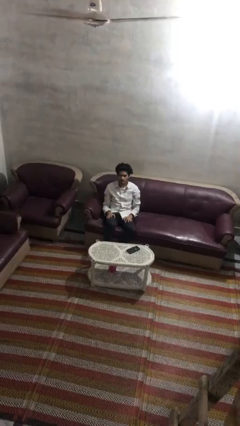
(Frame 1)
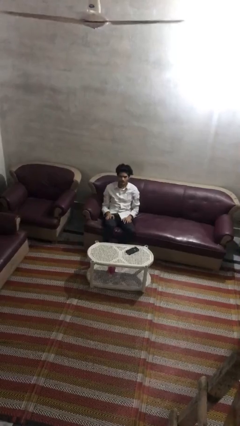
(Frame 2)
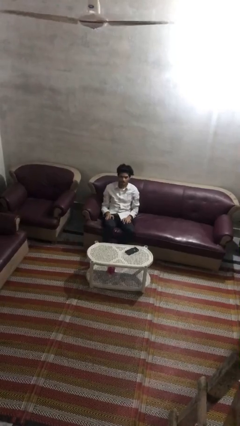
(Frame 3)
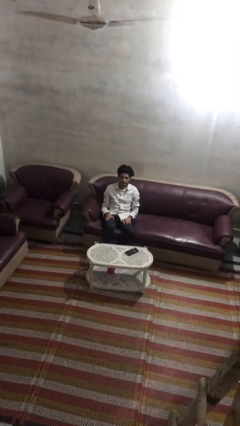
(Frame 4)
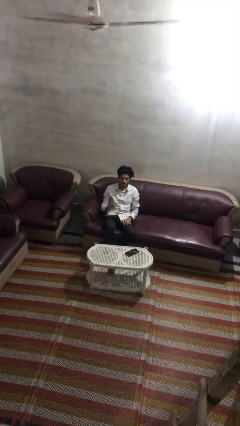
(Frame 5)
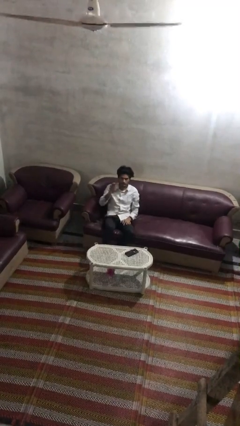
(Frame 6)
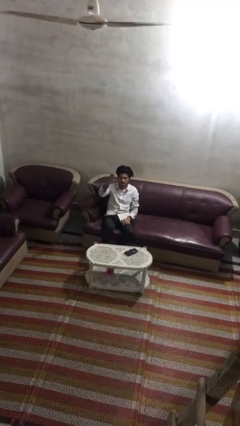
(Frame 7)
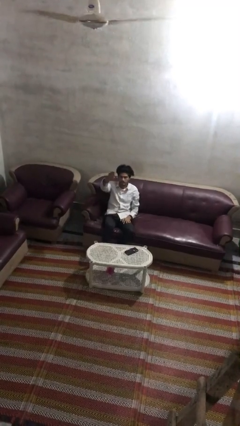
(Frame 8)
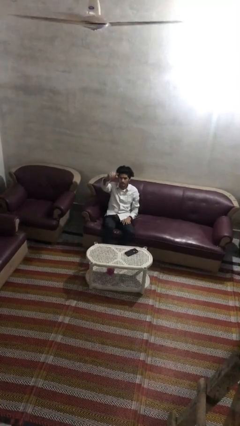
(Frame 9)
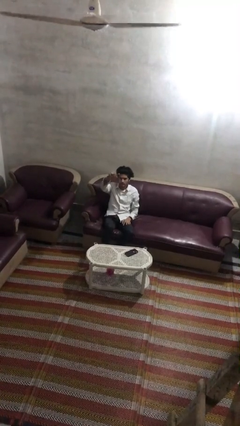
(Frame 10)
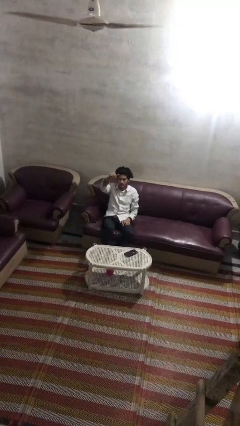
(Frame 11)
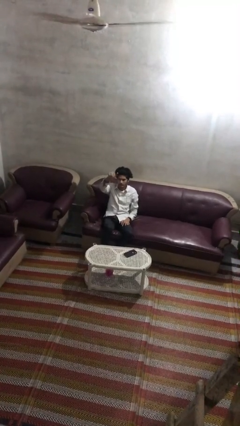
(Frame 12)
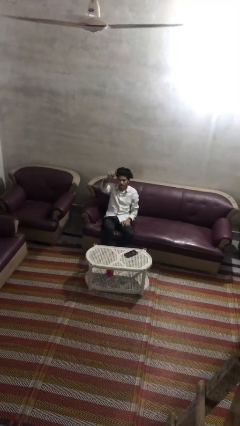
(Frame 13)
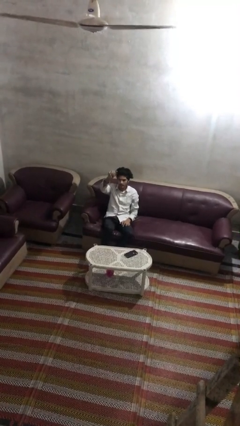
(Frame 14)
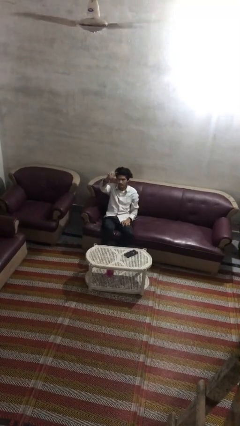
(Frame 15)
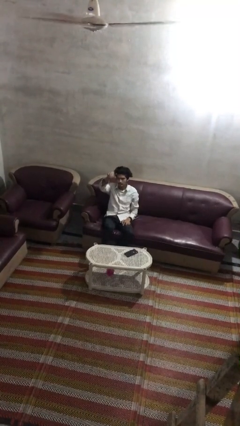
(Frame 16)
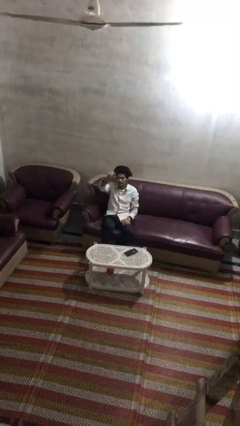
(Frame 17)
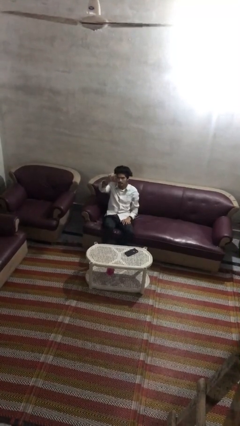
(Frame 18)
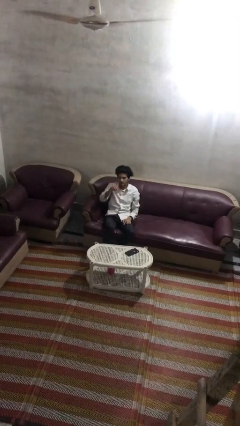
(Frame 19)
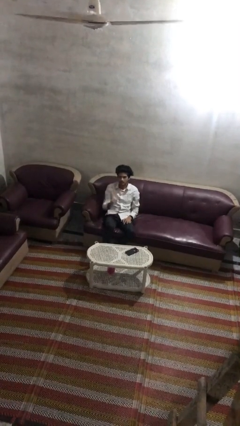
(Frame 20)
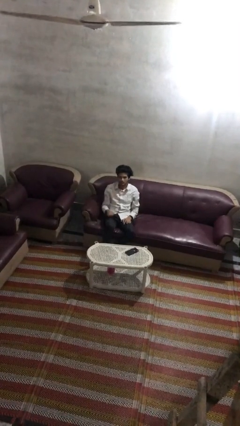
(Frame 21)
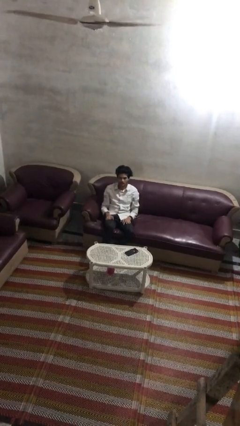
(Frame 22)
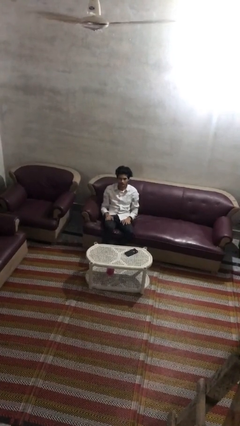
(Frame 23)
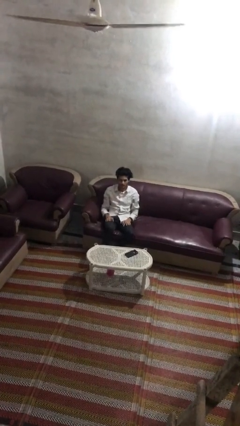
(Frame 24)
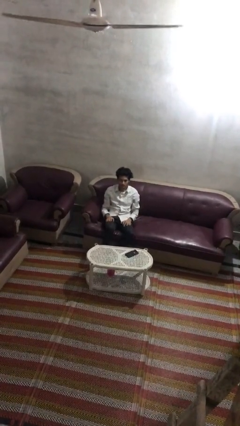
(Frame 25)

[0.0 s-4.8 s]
person gestures come here

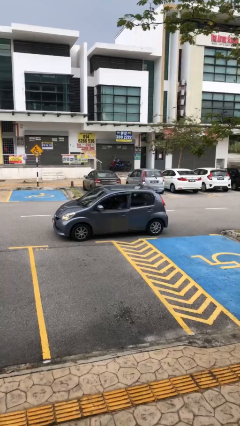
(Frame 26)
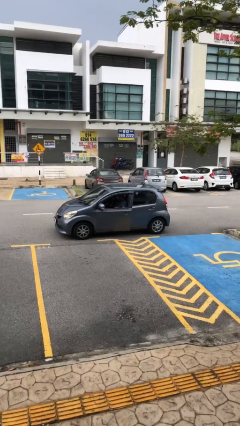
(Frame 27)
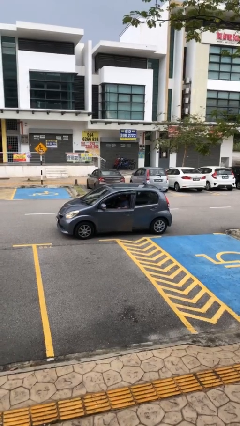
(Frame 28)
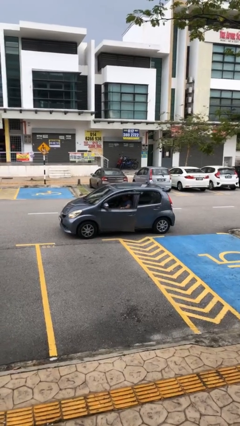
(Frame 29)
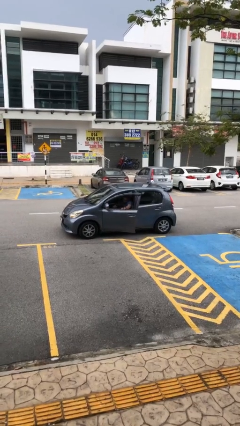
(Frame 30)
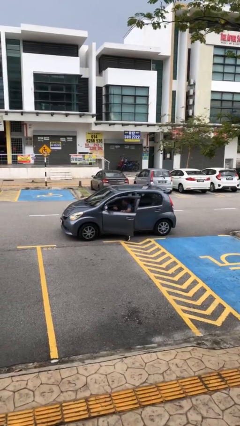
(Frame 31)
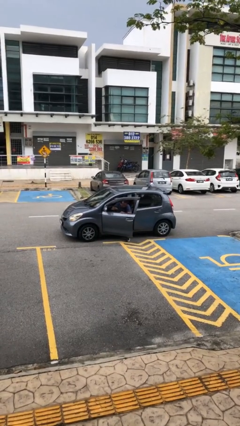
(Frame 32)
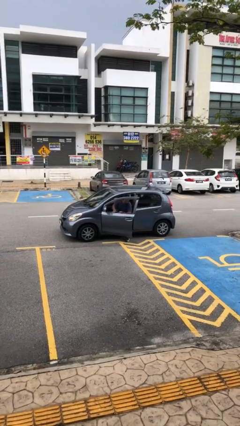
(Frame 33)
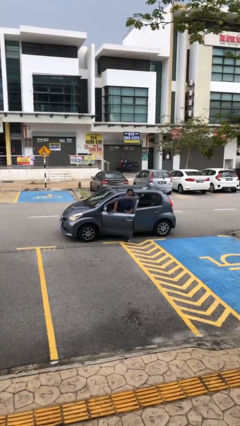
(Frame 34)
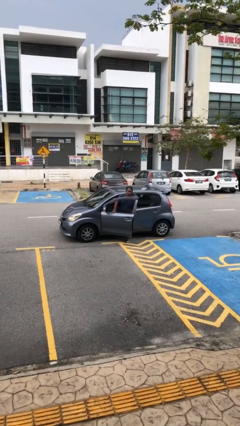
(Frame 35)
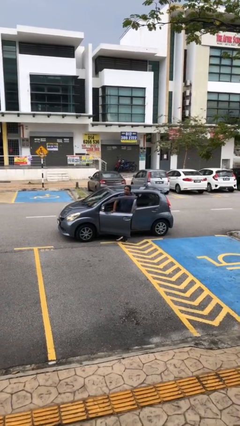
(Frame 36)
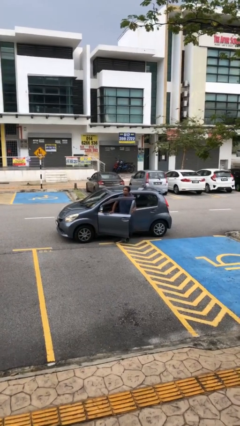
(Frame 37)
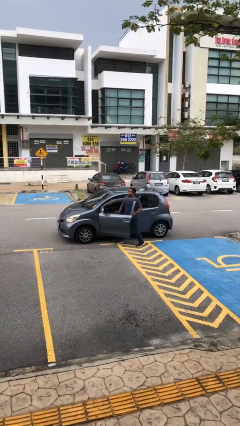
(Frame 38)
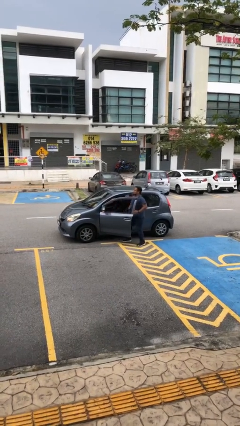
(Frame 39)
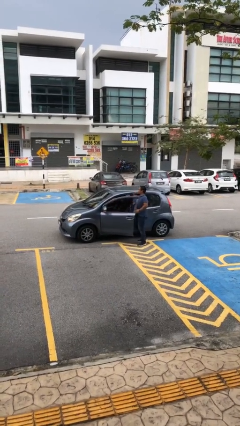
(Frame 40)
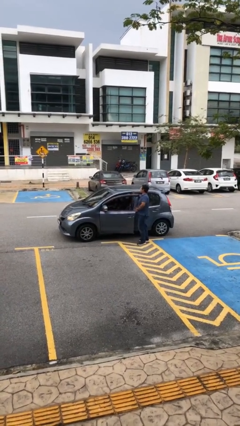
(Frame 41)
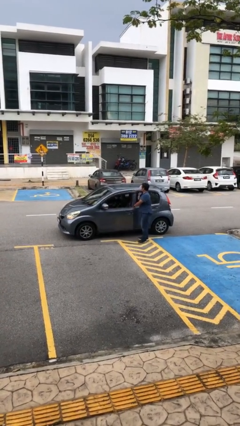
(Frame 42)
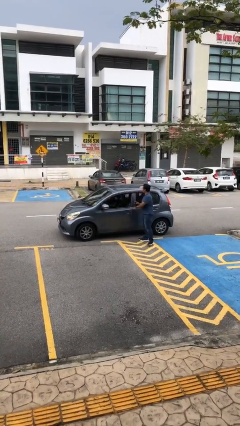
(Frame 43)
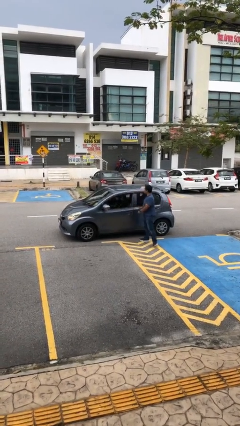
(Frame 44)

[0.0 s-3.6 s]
car drops off person

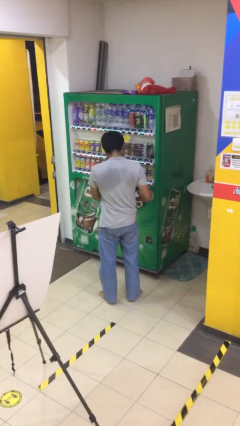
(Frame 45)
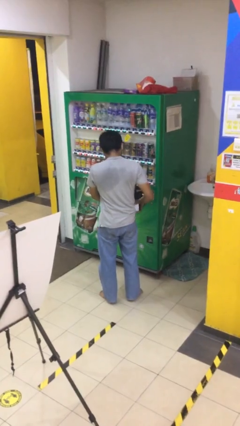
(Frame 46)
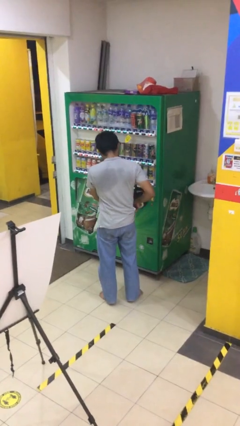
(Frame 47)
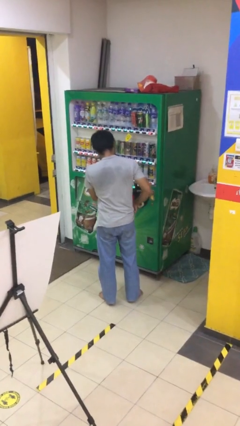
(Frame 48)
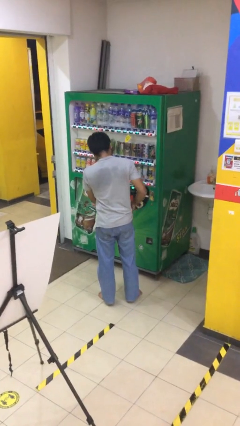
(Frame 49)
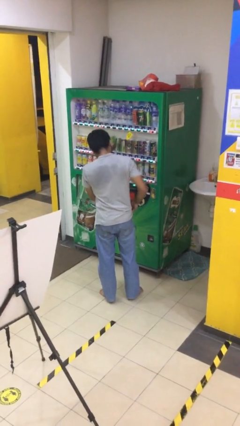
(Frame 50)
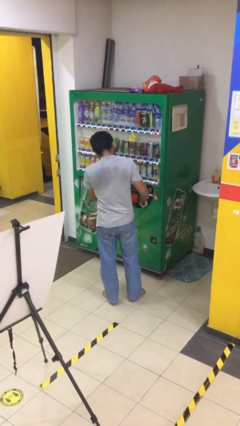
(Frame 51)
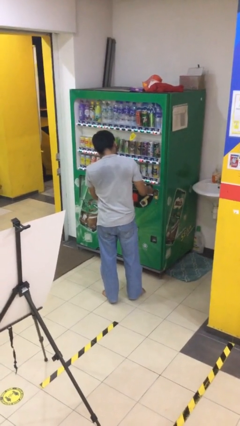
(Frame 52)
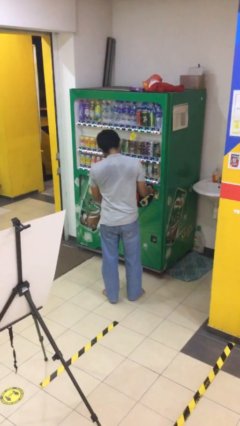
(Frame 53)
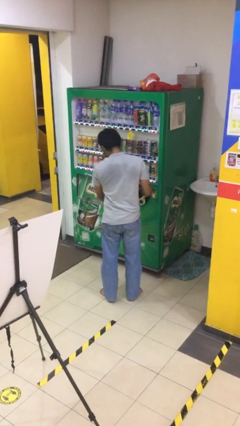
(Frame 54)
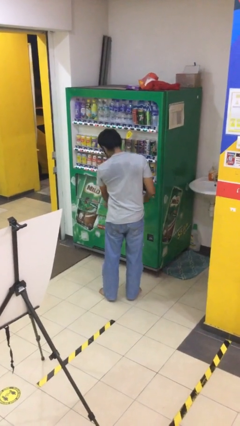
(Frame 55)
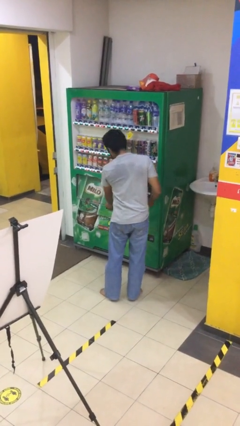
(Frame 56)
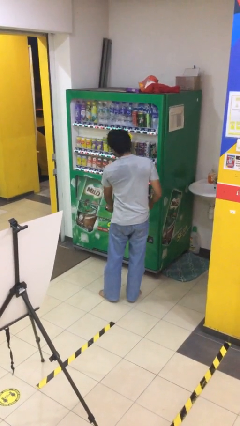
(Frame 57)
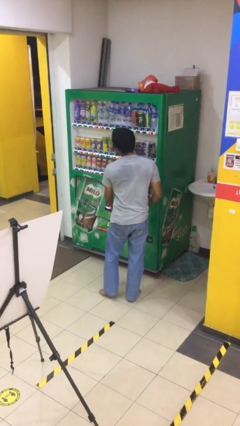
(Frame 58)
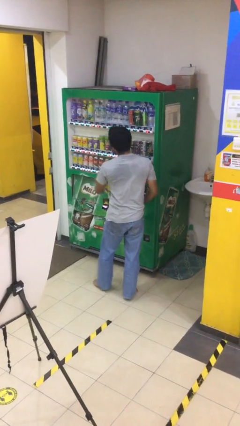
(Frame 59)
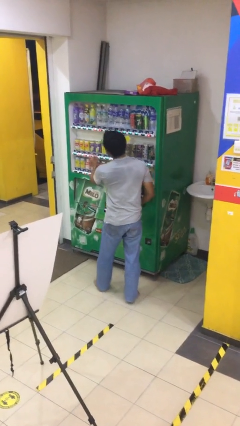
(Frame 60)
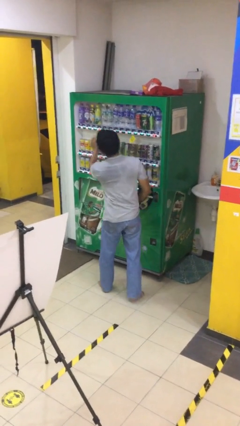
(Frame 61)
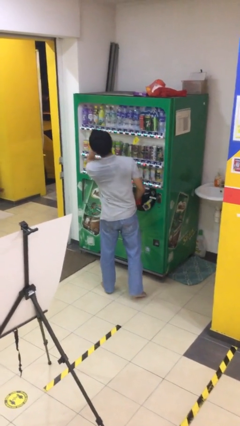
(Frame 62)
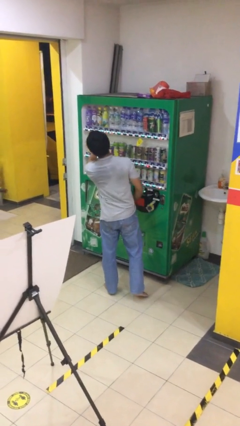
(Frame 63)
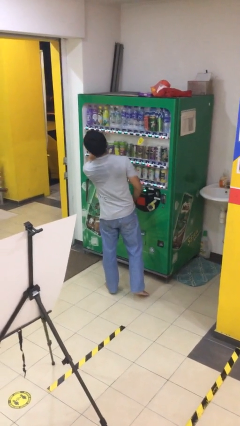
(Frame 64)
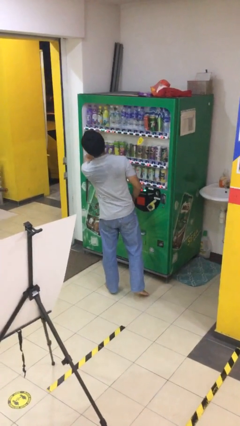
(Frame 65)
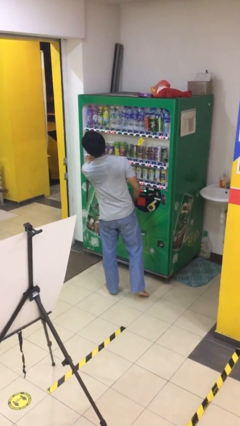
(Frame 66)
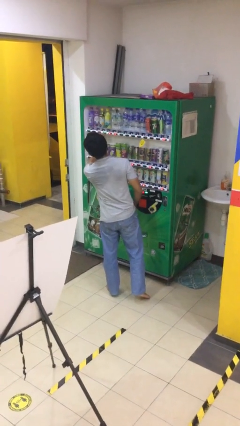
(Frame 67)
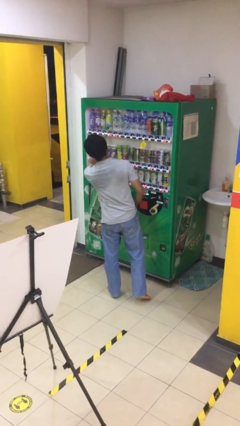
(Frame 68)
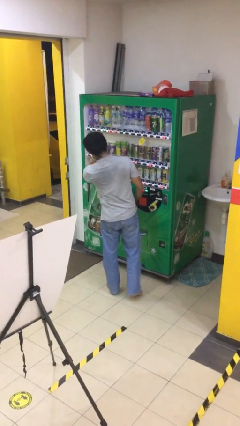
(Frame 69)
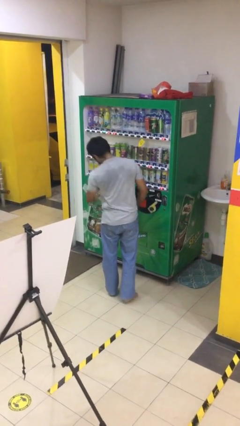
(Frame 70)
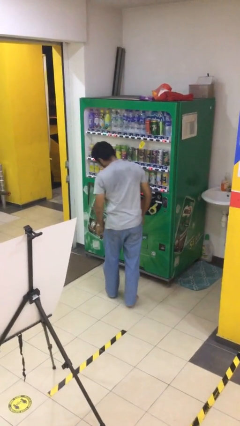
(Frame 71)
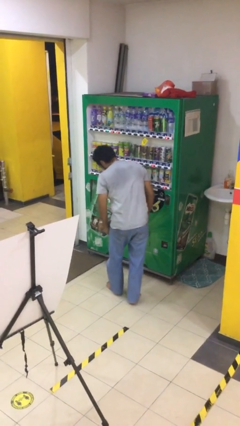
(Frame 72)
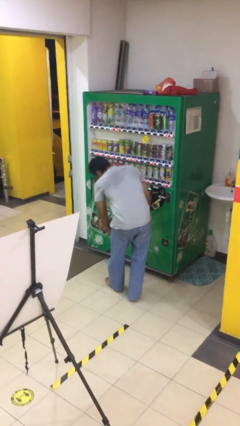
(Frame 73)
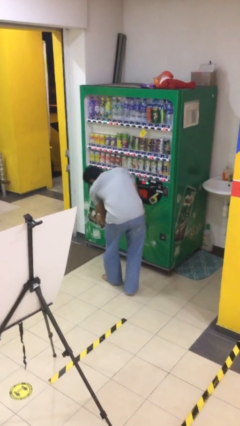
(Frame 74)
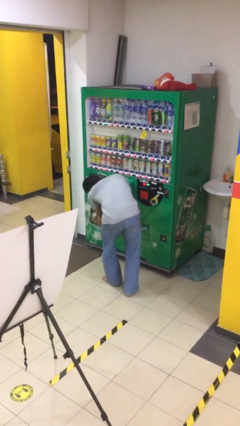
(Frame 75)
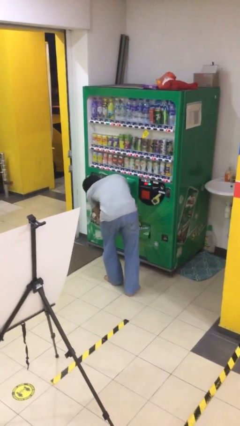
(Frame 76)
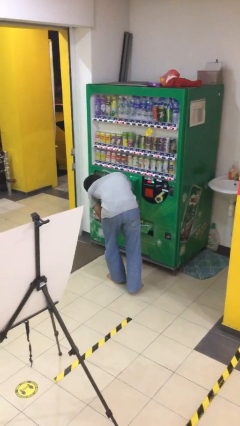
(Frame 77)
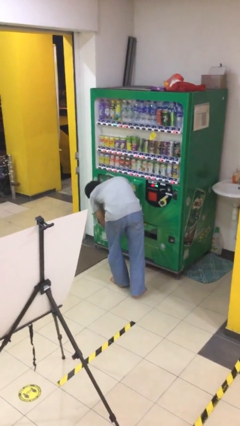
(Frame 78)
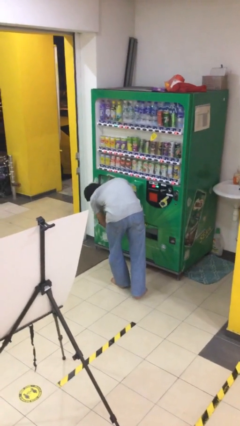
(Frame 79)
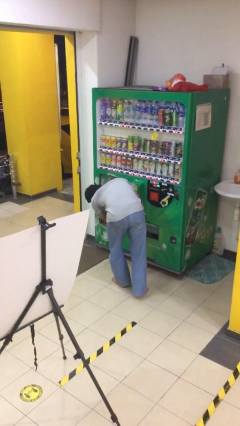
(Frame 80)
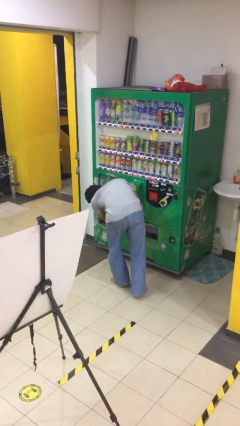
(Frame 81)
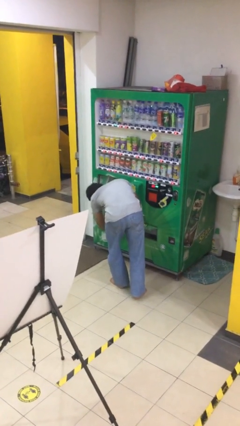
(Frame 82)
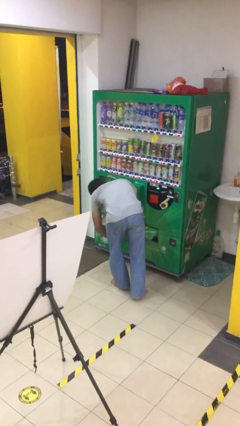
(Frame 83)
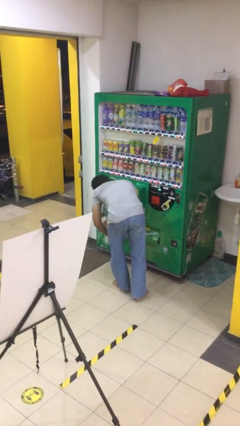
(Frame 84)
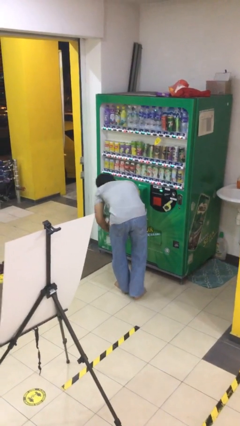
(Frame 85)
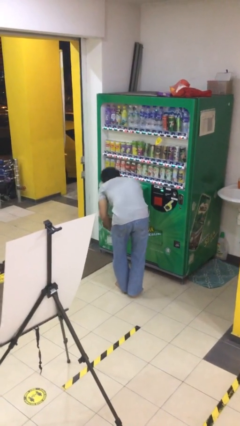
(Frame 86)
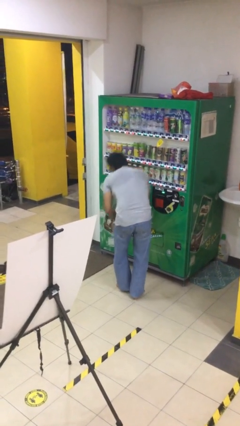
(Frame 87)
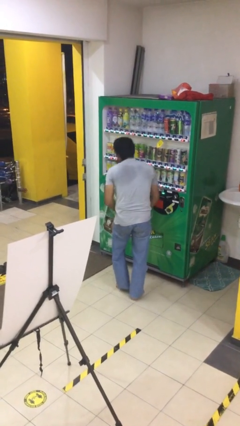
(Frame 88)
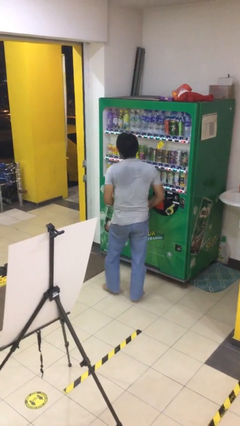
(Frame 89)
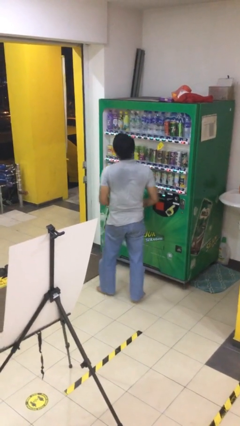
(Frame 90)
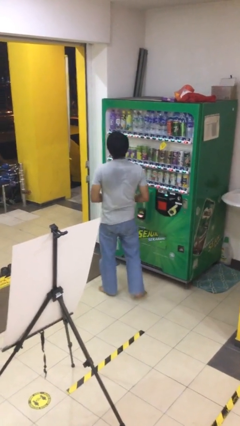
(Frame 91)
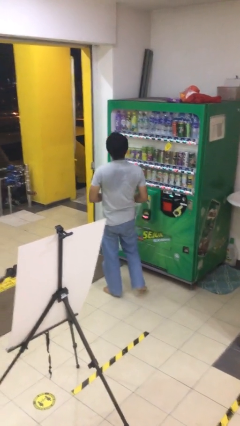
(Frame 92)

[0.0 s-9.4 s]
person purchases from machine
